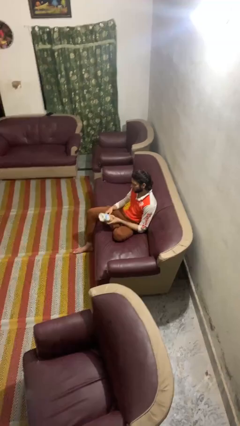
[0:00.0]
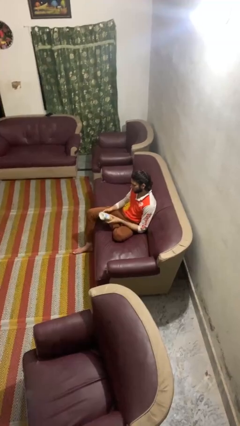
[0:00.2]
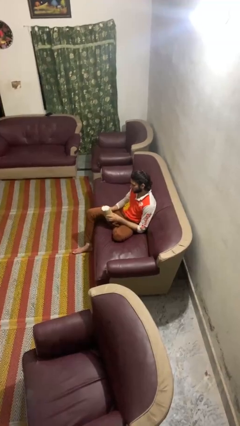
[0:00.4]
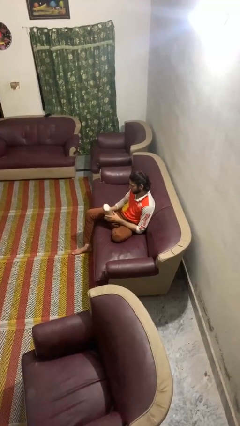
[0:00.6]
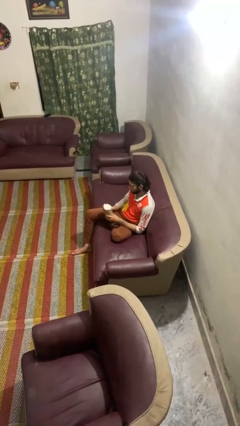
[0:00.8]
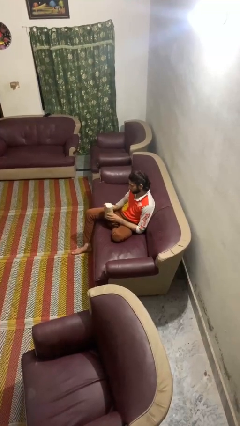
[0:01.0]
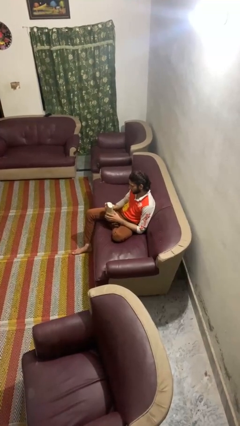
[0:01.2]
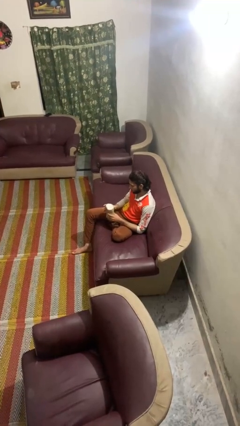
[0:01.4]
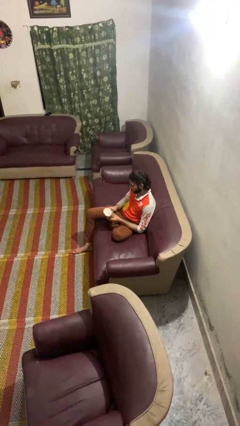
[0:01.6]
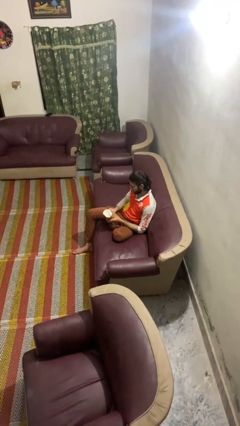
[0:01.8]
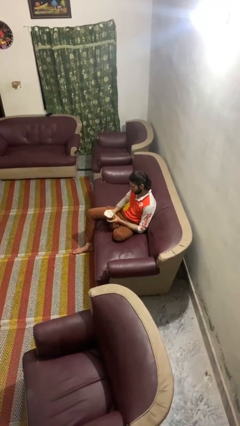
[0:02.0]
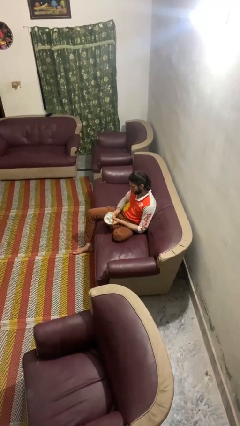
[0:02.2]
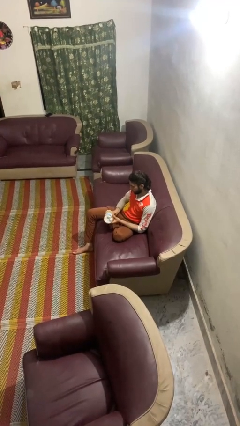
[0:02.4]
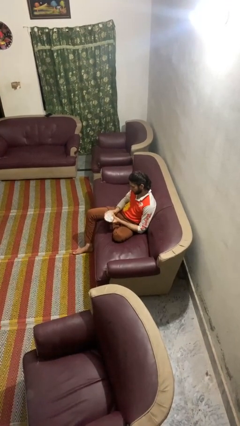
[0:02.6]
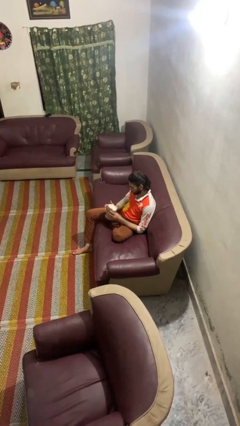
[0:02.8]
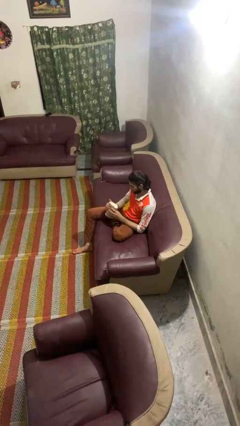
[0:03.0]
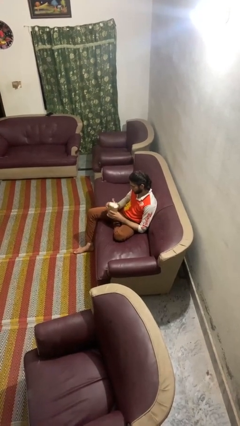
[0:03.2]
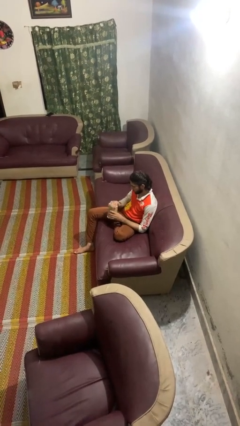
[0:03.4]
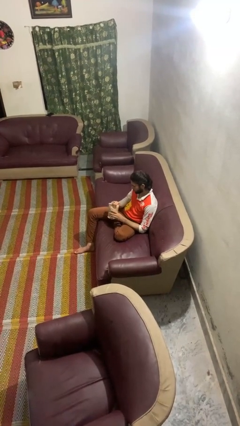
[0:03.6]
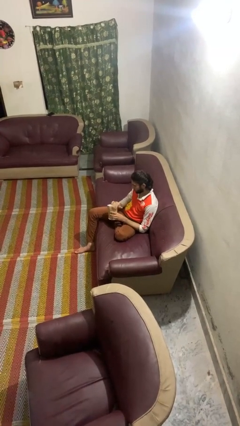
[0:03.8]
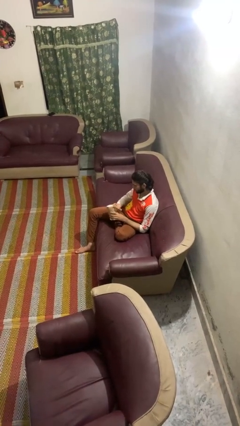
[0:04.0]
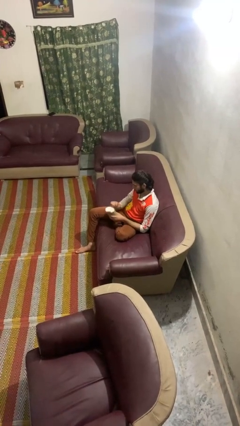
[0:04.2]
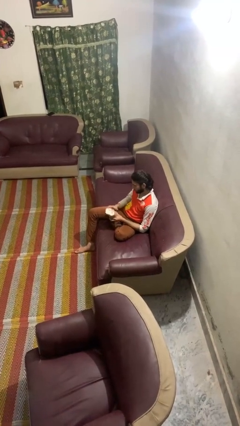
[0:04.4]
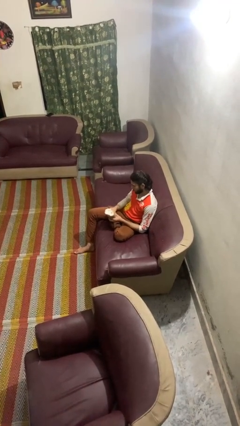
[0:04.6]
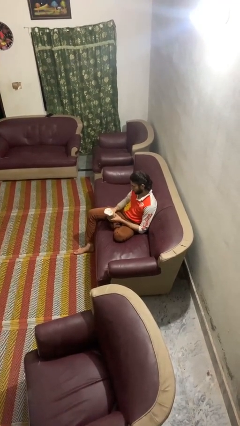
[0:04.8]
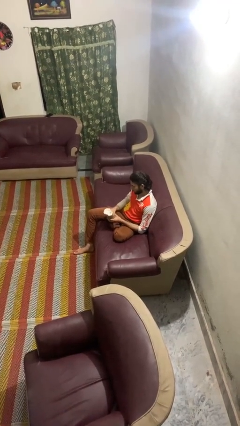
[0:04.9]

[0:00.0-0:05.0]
person squeezes object

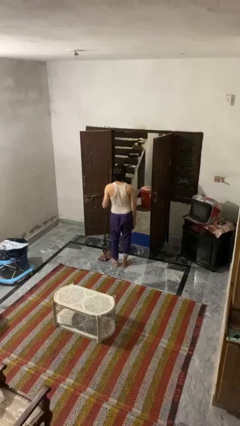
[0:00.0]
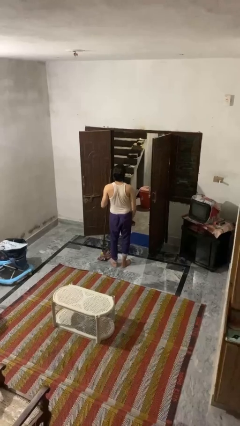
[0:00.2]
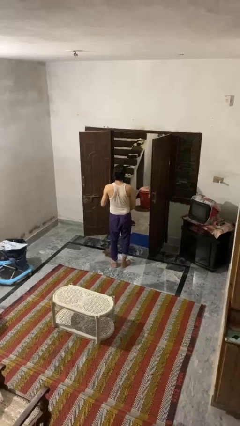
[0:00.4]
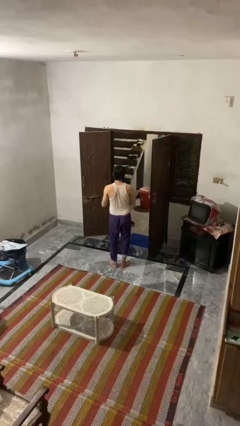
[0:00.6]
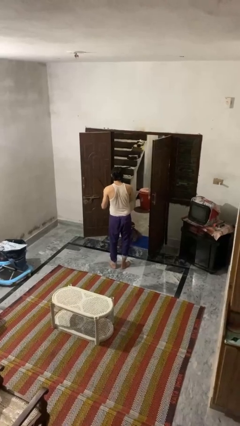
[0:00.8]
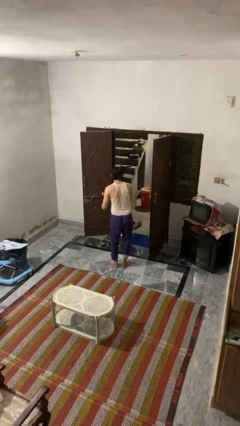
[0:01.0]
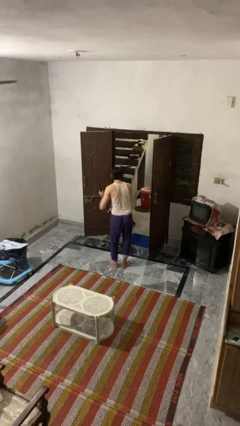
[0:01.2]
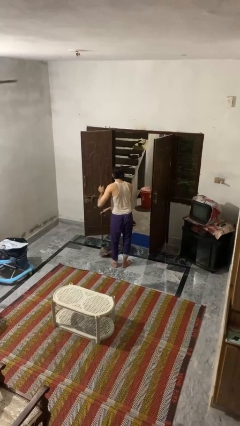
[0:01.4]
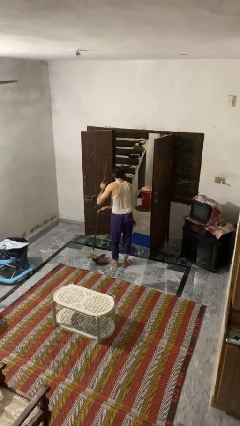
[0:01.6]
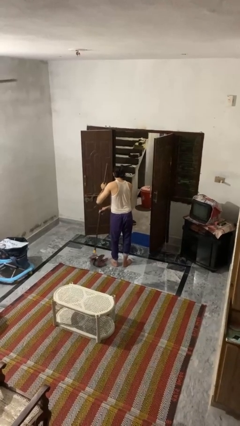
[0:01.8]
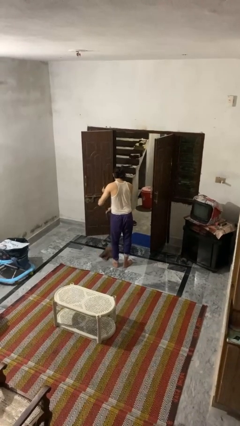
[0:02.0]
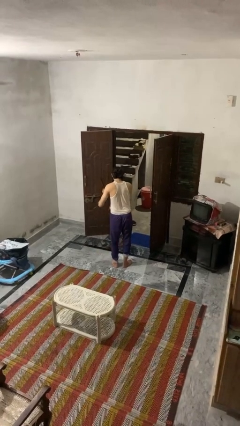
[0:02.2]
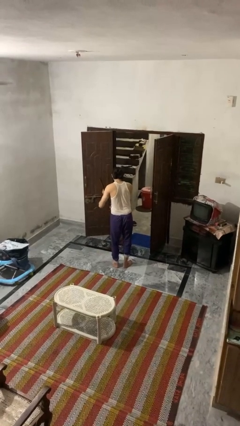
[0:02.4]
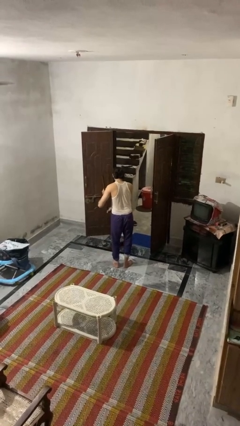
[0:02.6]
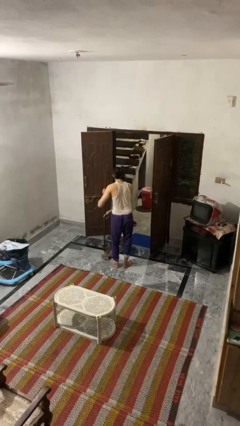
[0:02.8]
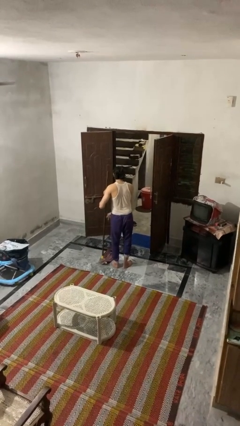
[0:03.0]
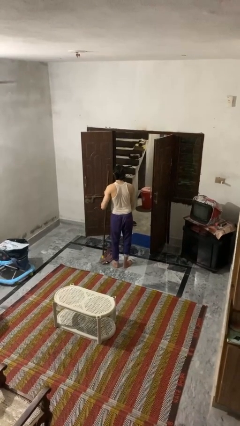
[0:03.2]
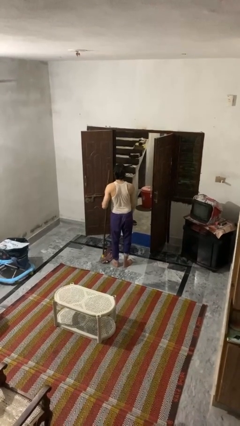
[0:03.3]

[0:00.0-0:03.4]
person mops

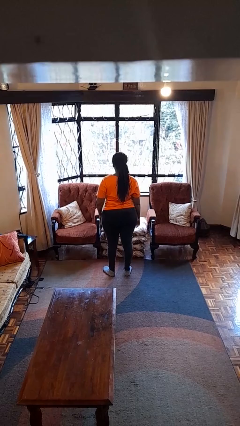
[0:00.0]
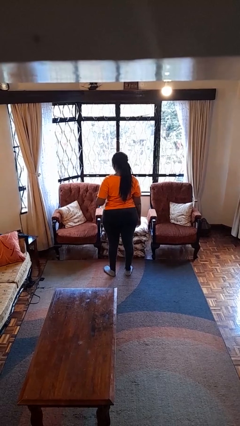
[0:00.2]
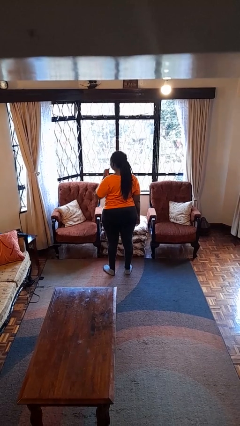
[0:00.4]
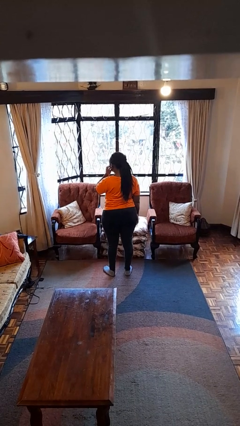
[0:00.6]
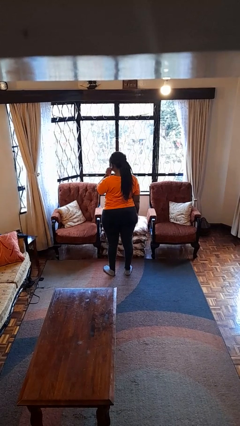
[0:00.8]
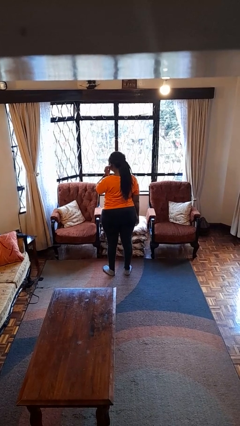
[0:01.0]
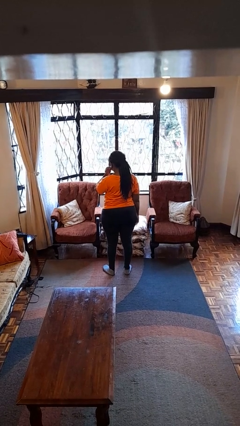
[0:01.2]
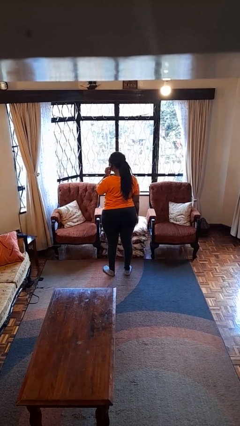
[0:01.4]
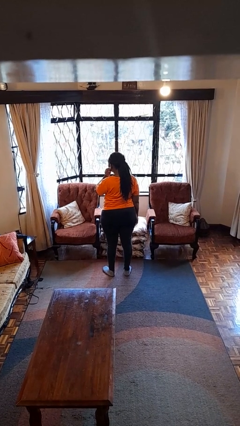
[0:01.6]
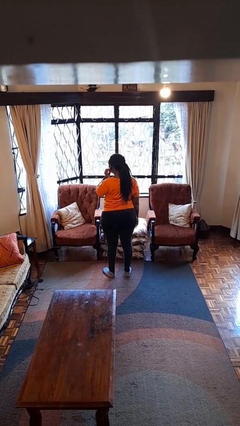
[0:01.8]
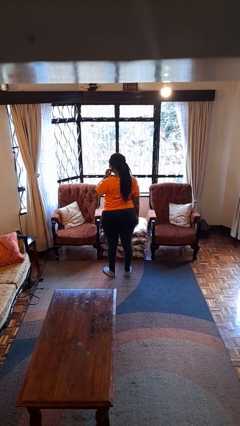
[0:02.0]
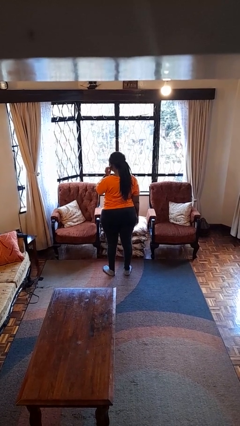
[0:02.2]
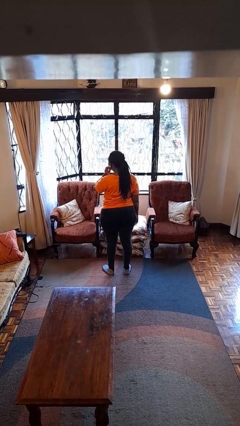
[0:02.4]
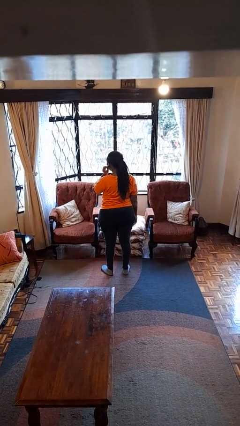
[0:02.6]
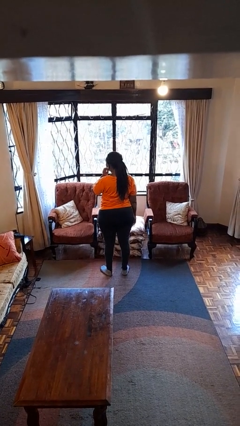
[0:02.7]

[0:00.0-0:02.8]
person touches earlobe

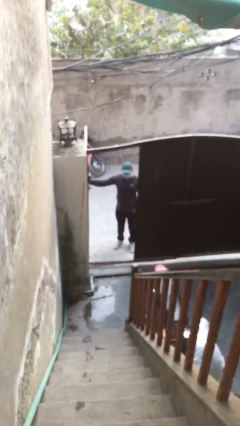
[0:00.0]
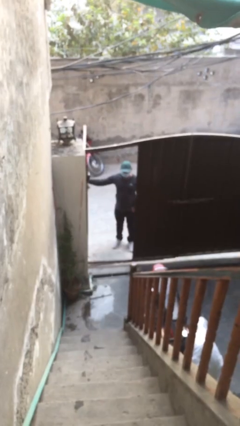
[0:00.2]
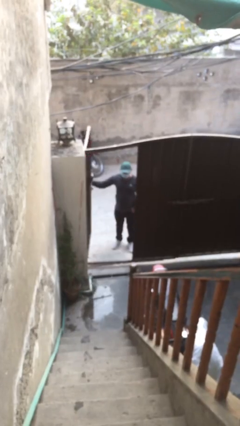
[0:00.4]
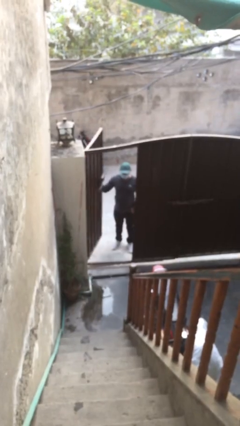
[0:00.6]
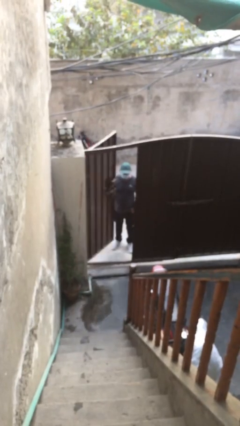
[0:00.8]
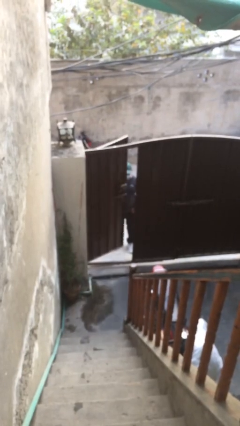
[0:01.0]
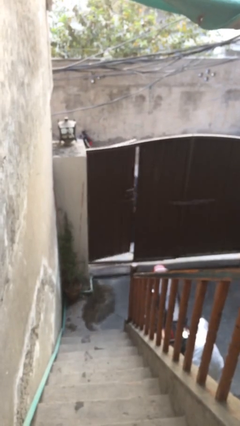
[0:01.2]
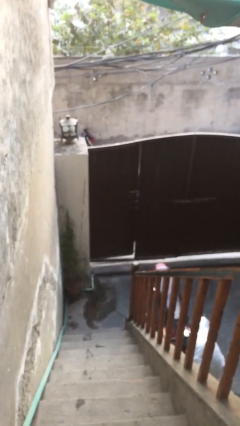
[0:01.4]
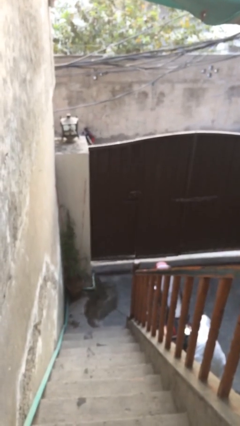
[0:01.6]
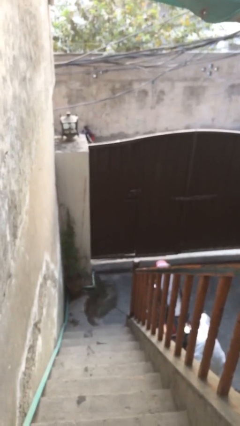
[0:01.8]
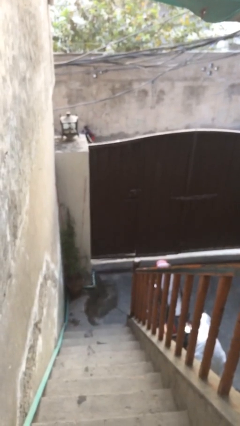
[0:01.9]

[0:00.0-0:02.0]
person closes facility door

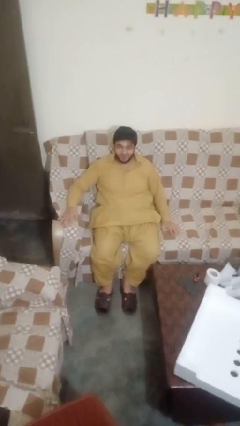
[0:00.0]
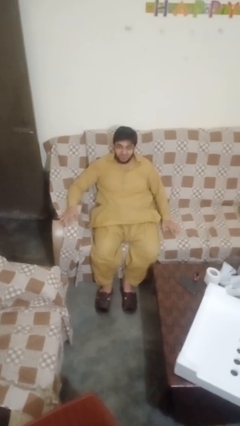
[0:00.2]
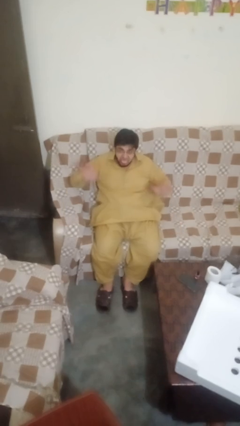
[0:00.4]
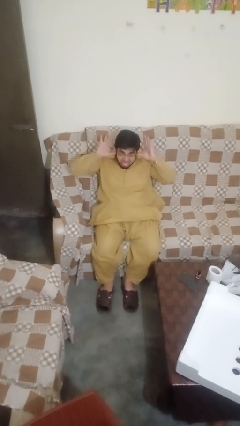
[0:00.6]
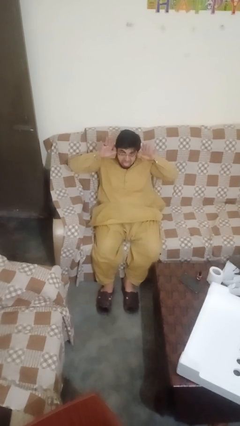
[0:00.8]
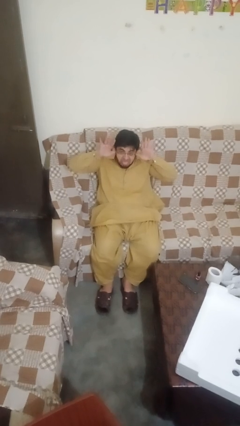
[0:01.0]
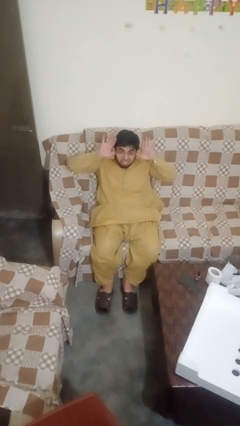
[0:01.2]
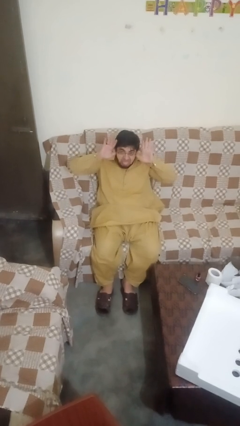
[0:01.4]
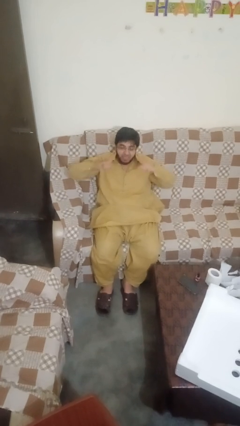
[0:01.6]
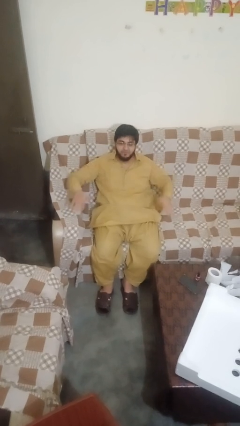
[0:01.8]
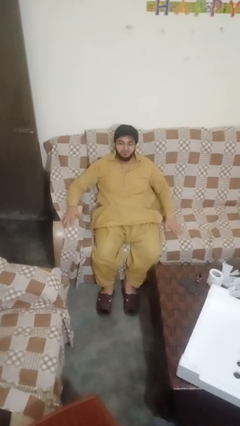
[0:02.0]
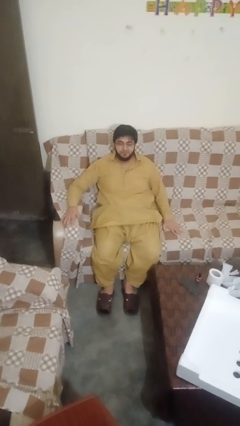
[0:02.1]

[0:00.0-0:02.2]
person sticks out tongue

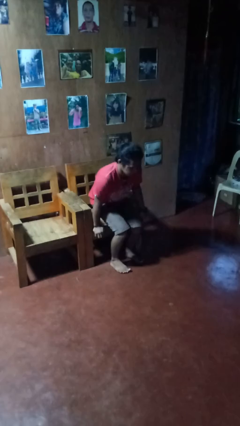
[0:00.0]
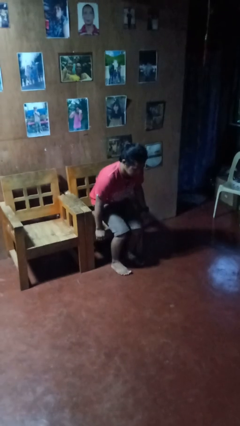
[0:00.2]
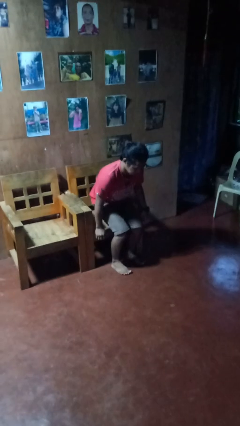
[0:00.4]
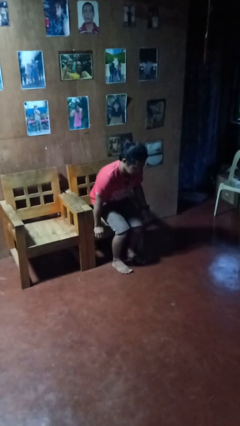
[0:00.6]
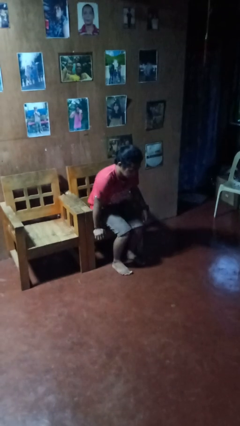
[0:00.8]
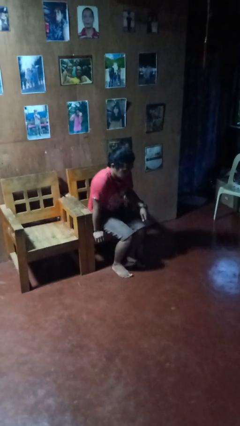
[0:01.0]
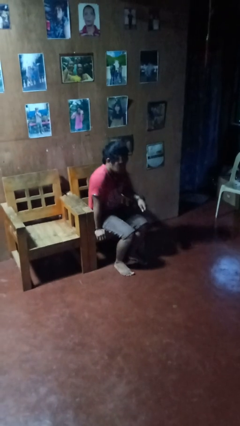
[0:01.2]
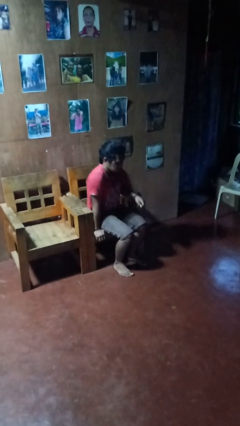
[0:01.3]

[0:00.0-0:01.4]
person stands up from floor

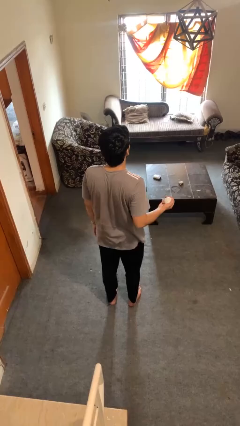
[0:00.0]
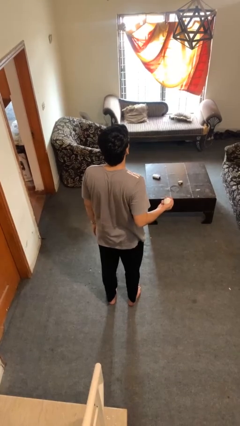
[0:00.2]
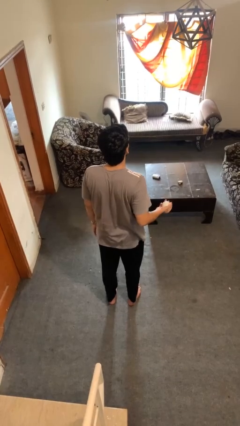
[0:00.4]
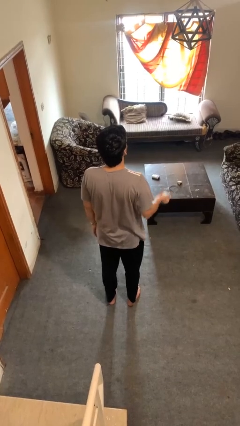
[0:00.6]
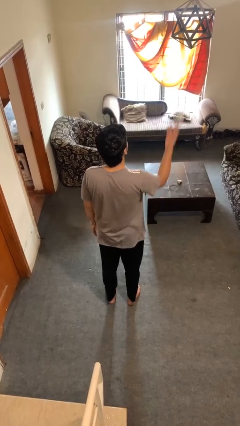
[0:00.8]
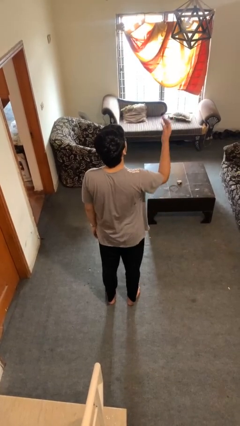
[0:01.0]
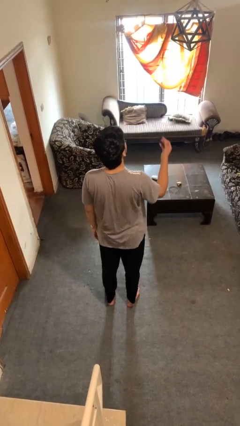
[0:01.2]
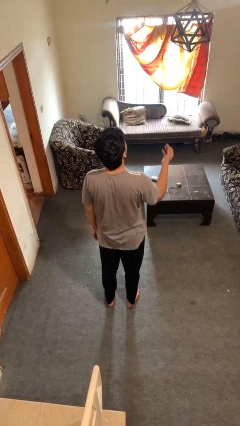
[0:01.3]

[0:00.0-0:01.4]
person drops object
